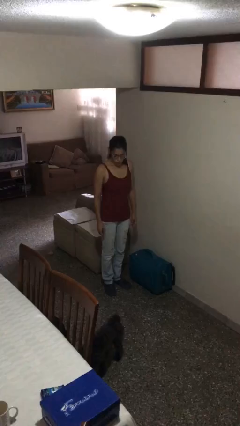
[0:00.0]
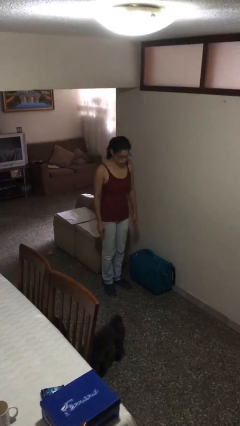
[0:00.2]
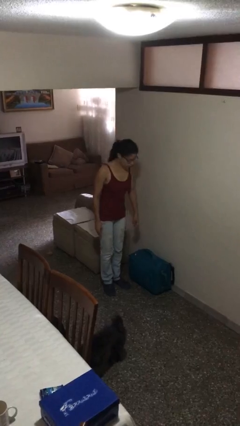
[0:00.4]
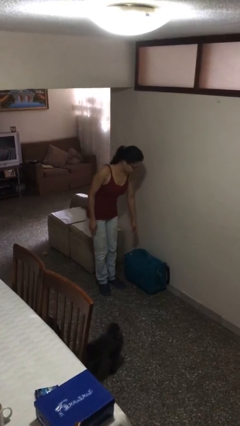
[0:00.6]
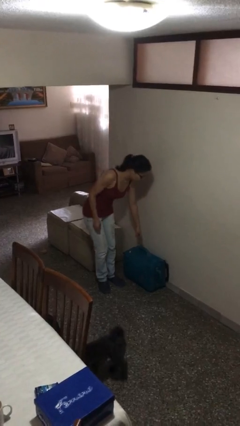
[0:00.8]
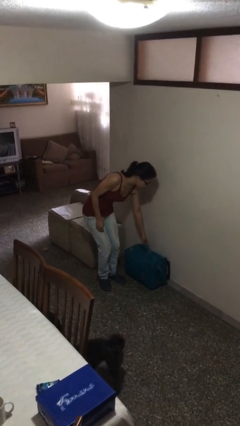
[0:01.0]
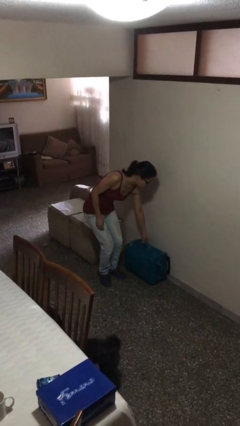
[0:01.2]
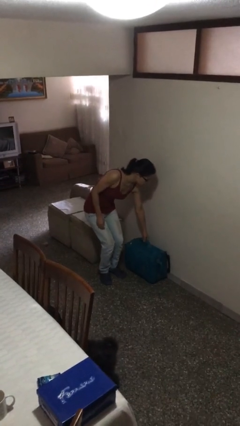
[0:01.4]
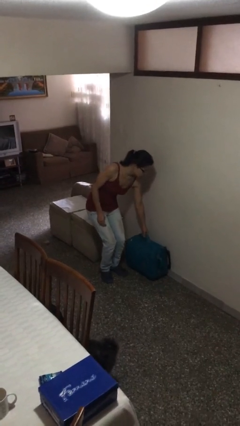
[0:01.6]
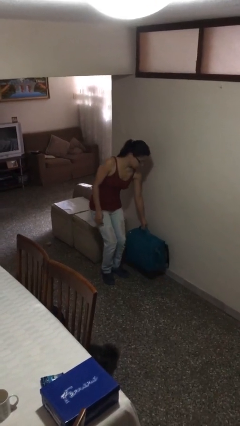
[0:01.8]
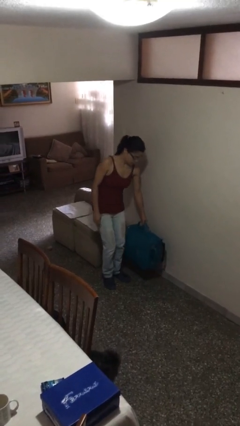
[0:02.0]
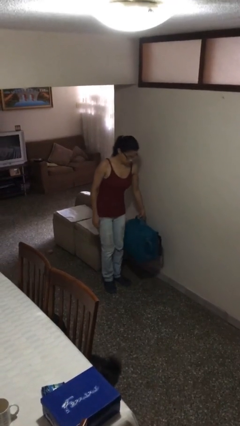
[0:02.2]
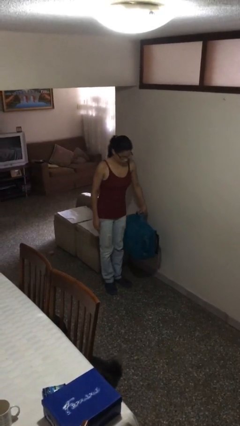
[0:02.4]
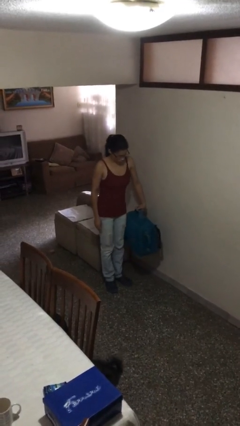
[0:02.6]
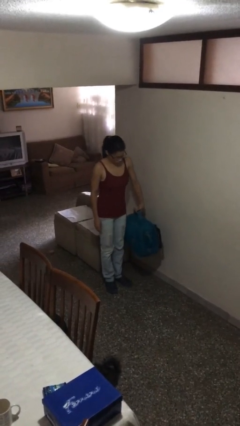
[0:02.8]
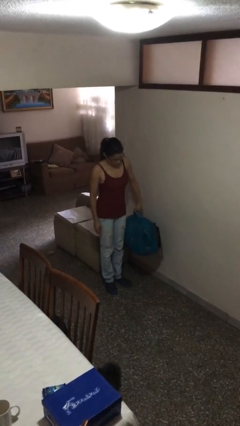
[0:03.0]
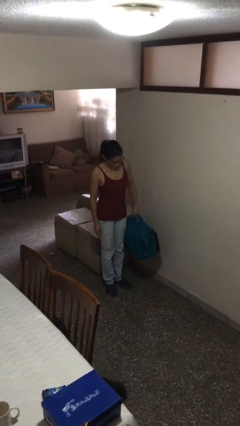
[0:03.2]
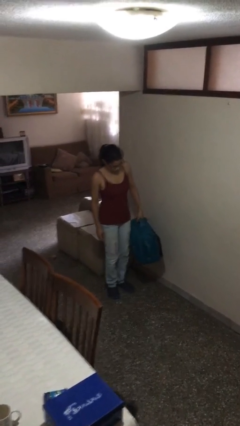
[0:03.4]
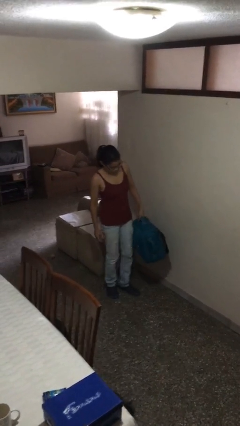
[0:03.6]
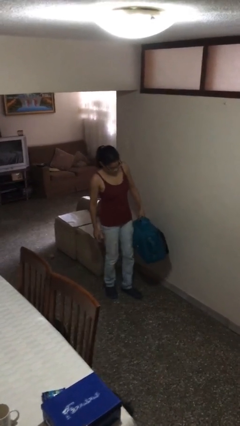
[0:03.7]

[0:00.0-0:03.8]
person picks up object from floor

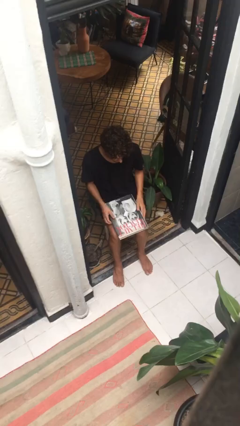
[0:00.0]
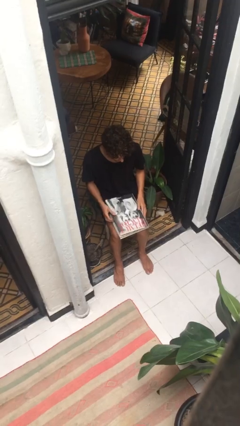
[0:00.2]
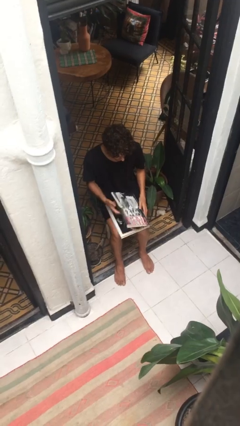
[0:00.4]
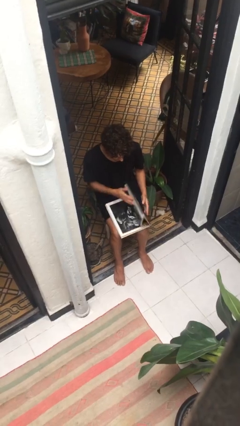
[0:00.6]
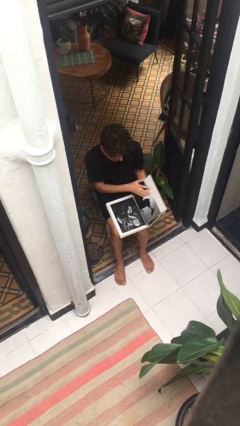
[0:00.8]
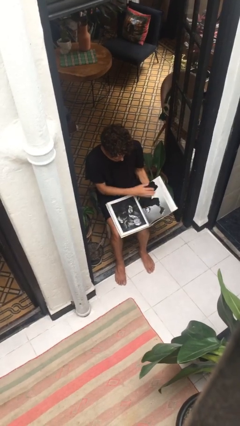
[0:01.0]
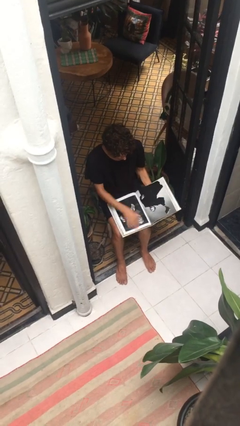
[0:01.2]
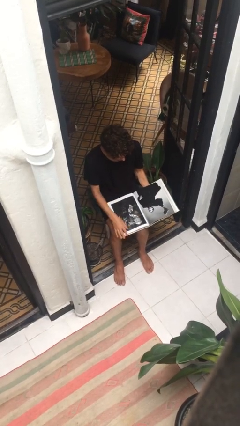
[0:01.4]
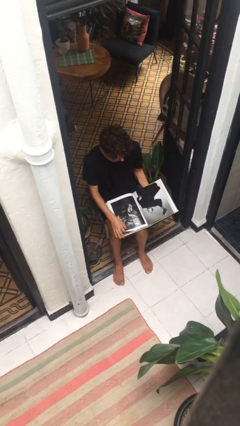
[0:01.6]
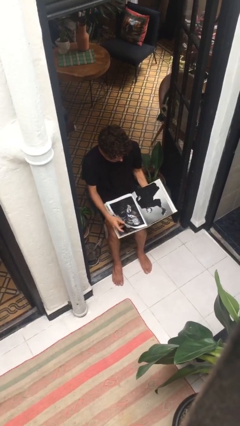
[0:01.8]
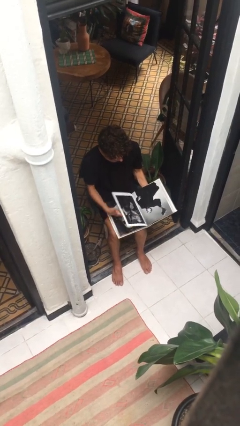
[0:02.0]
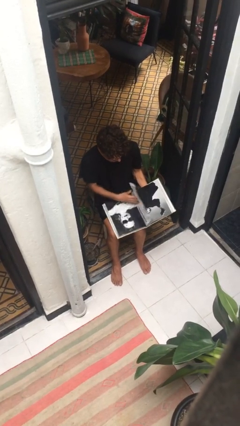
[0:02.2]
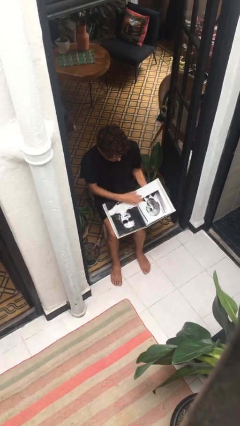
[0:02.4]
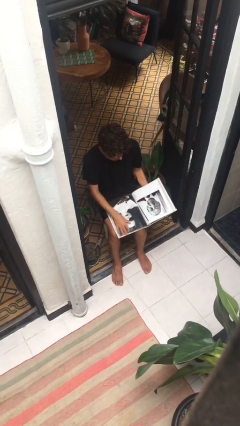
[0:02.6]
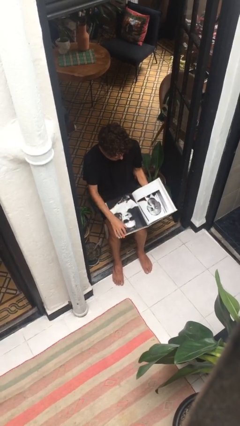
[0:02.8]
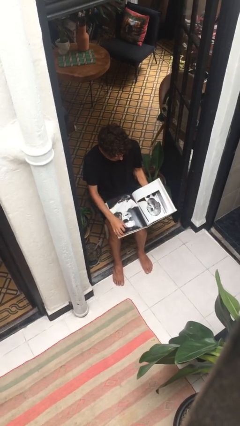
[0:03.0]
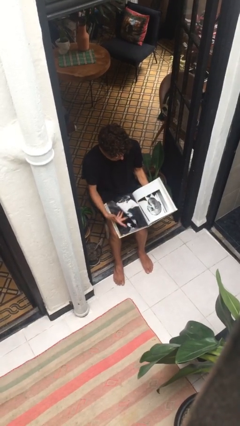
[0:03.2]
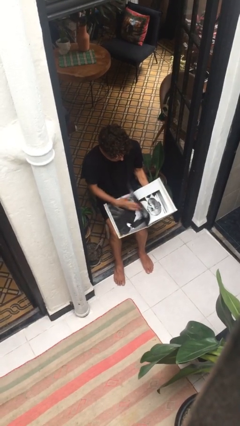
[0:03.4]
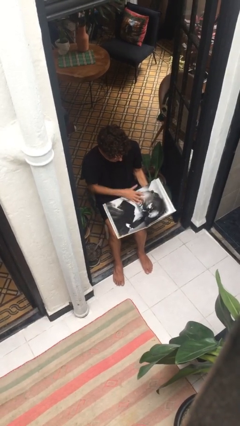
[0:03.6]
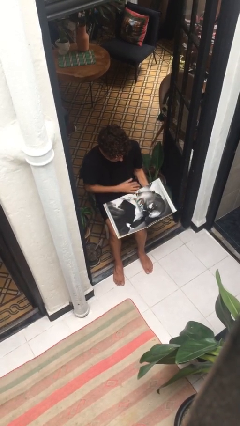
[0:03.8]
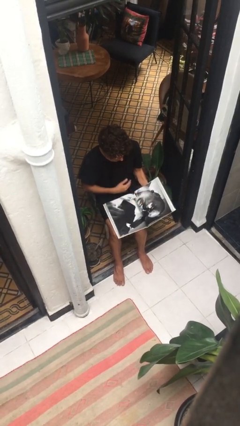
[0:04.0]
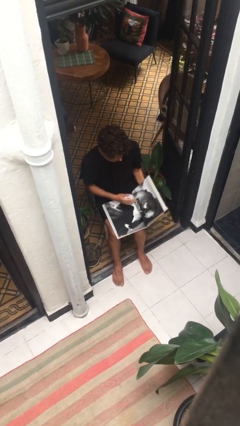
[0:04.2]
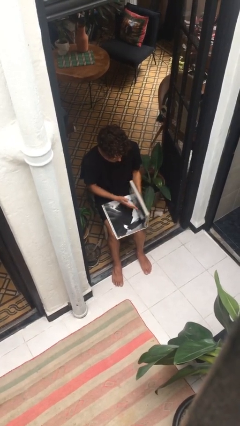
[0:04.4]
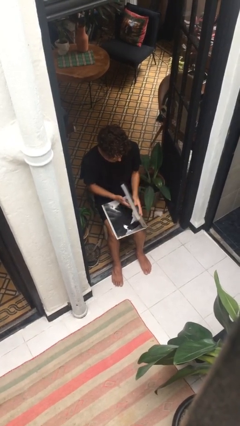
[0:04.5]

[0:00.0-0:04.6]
person reads document

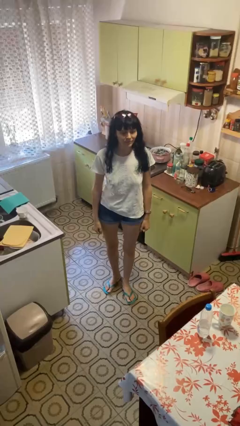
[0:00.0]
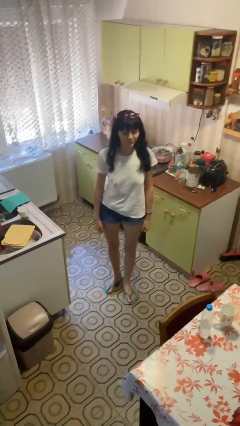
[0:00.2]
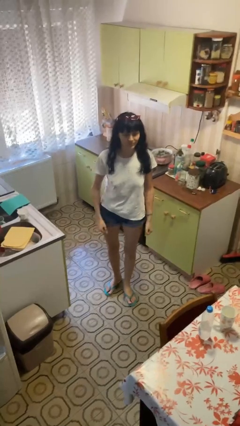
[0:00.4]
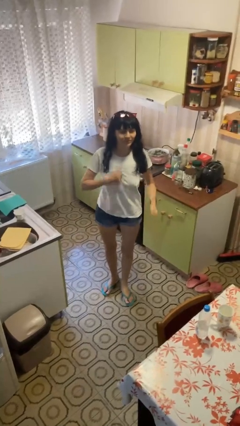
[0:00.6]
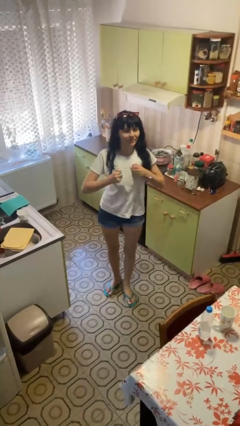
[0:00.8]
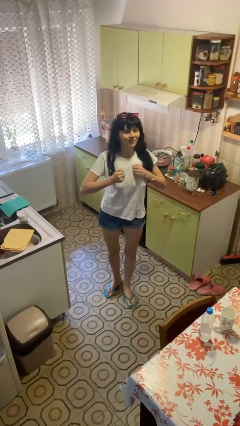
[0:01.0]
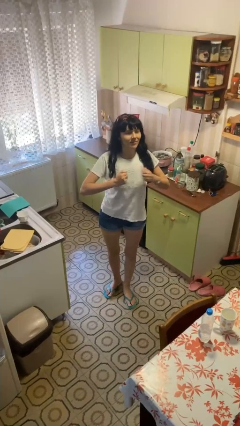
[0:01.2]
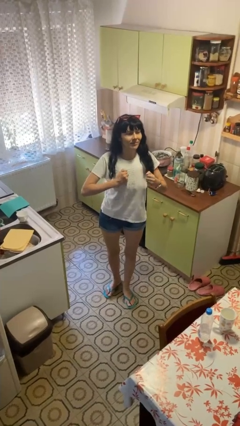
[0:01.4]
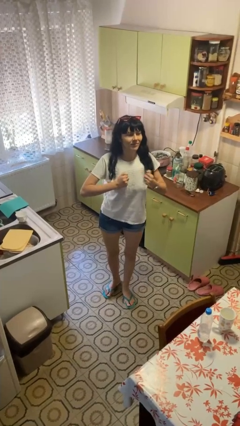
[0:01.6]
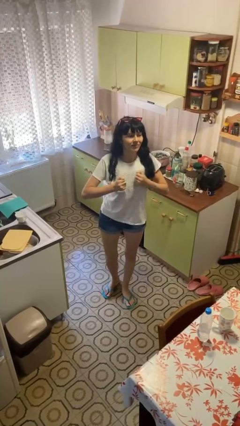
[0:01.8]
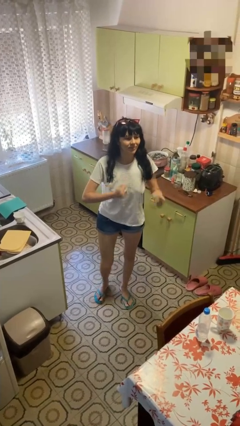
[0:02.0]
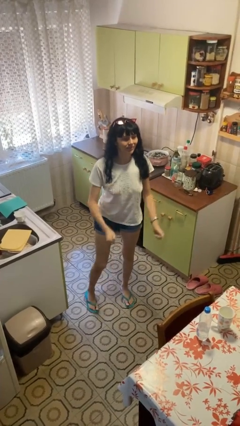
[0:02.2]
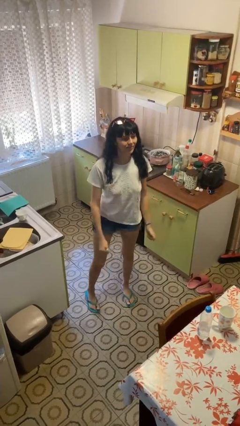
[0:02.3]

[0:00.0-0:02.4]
person drums on chest

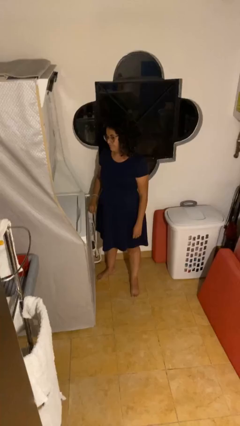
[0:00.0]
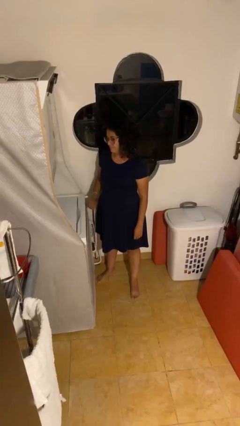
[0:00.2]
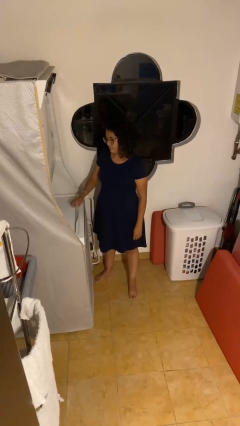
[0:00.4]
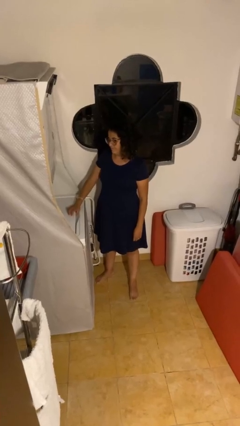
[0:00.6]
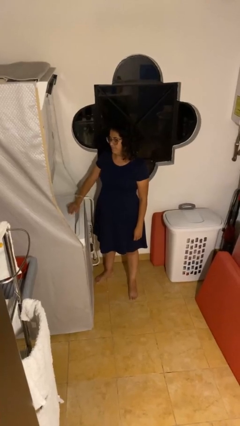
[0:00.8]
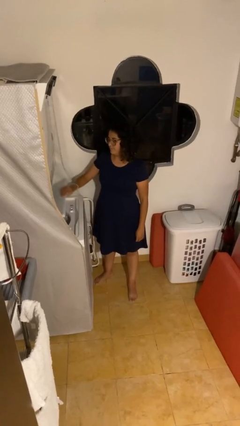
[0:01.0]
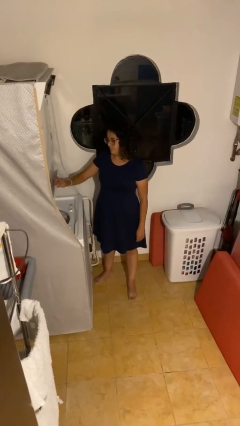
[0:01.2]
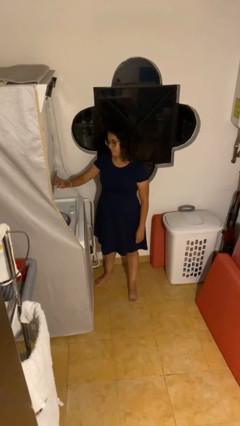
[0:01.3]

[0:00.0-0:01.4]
person opens clothes washer

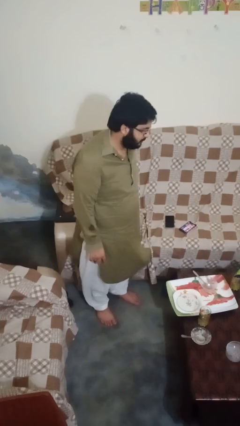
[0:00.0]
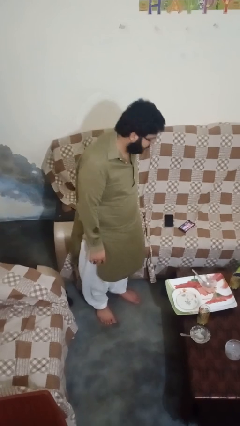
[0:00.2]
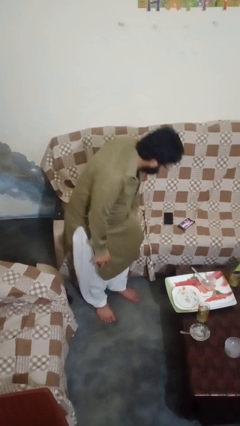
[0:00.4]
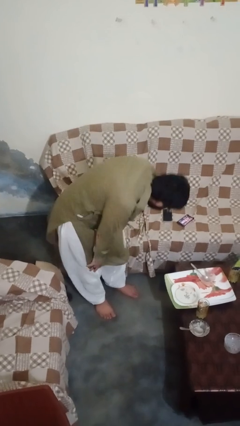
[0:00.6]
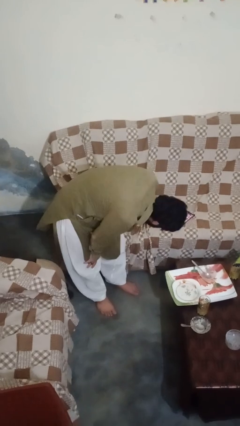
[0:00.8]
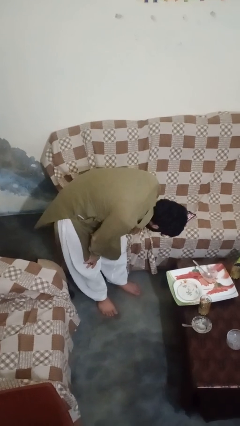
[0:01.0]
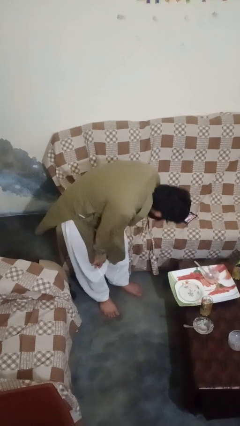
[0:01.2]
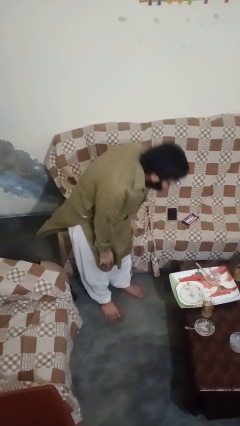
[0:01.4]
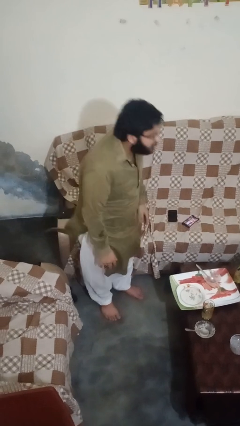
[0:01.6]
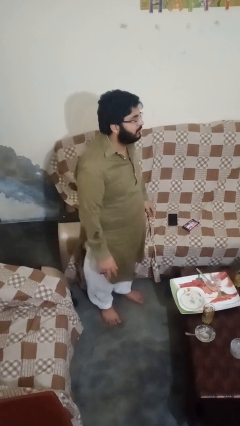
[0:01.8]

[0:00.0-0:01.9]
person bows

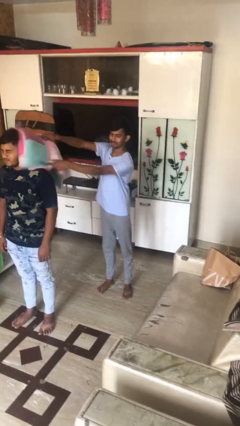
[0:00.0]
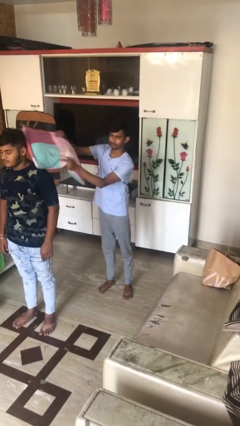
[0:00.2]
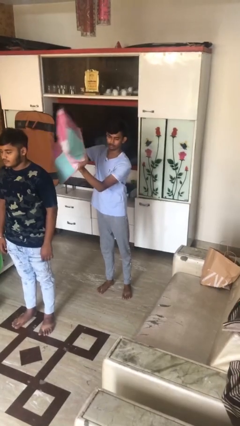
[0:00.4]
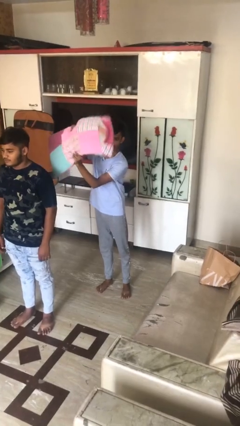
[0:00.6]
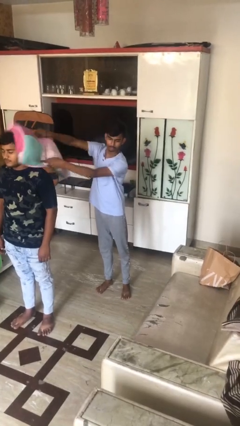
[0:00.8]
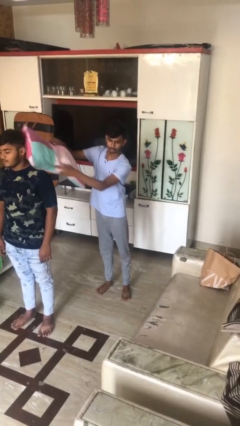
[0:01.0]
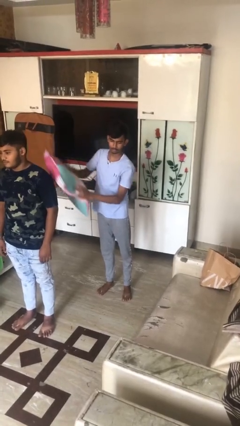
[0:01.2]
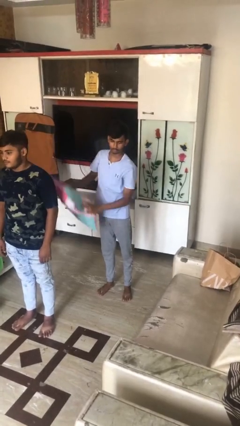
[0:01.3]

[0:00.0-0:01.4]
person hits person with pillow

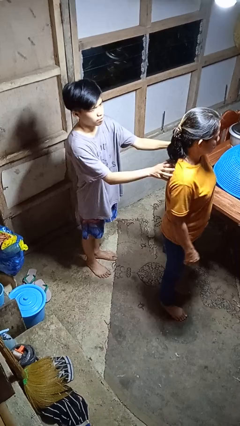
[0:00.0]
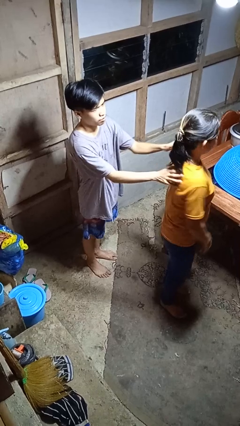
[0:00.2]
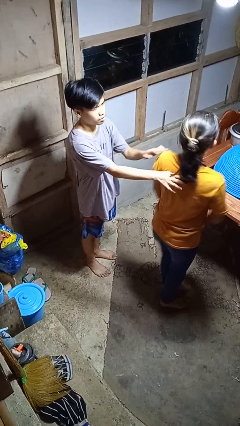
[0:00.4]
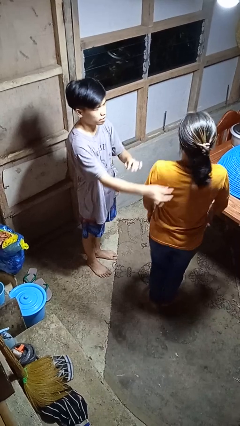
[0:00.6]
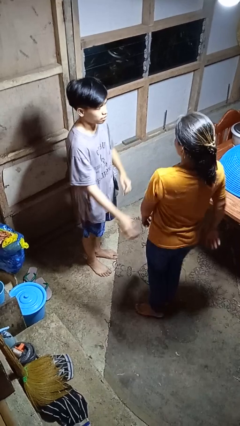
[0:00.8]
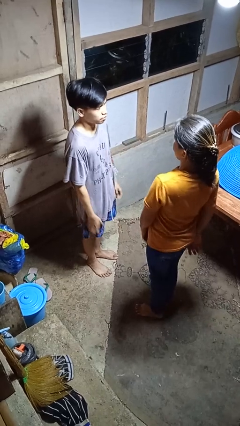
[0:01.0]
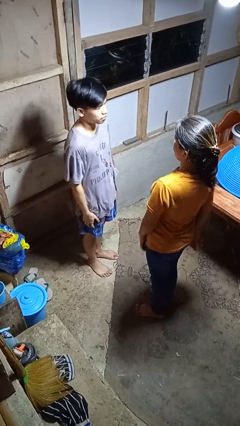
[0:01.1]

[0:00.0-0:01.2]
person spins person around

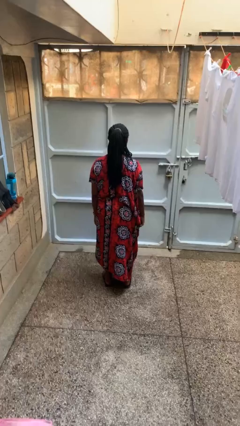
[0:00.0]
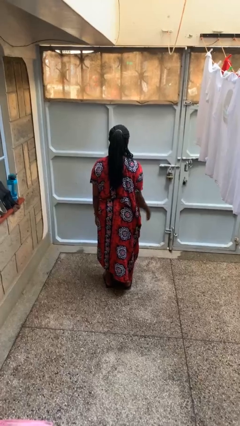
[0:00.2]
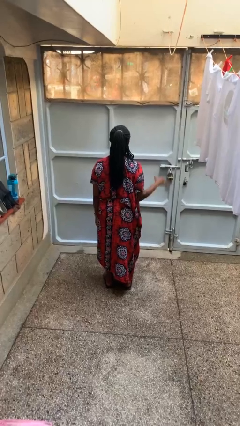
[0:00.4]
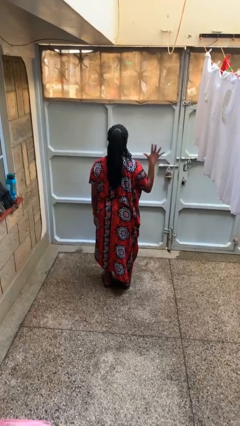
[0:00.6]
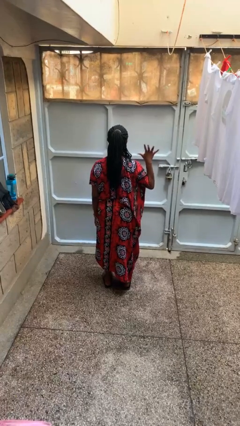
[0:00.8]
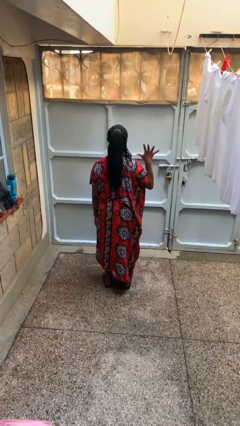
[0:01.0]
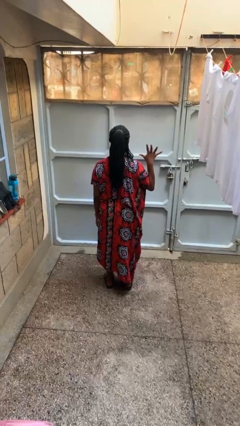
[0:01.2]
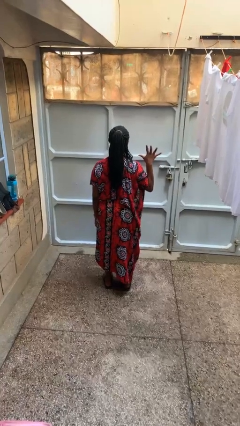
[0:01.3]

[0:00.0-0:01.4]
person gestures number five
